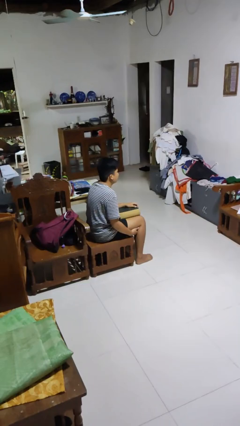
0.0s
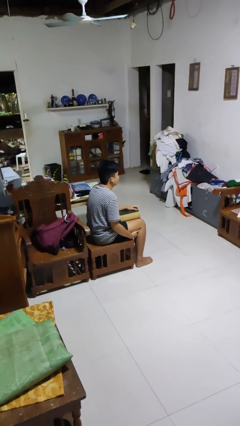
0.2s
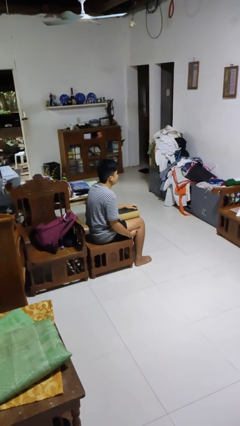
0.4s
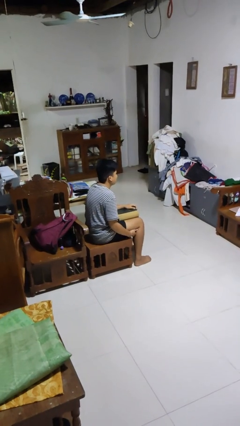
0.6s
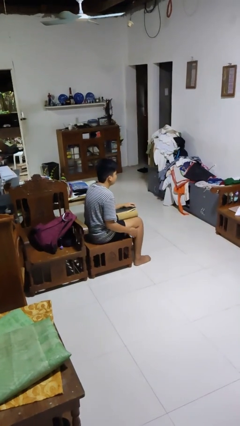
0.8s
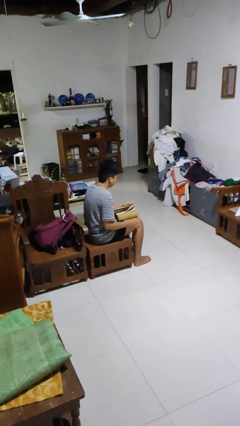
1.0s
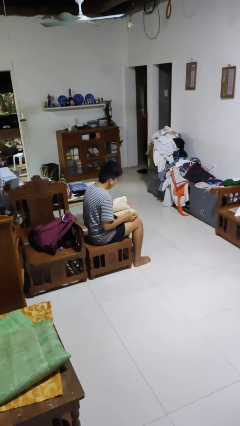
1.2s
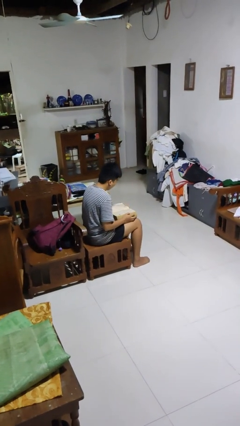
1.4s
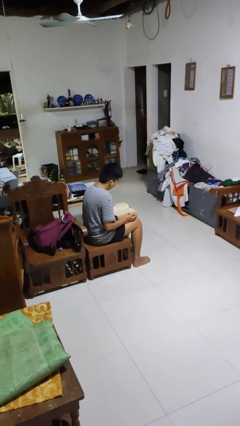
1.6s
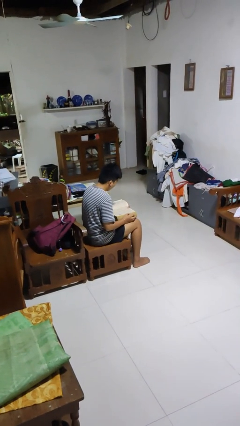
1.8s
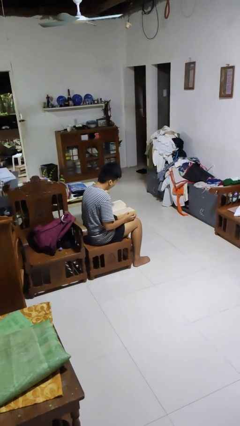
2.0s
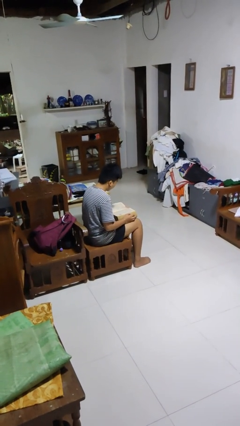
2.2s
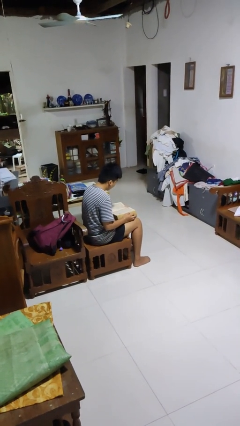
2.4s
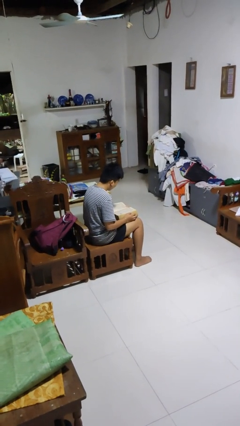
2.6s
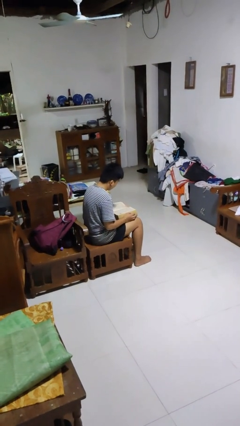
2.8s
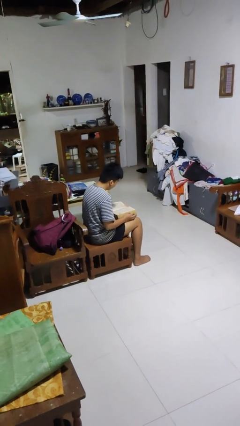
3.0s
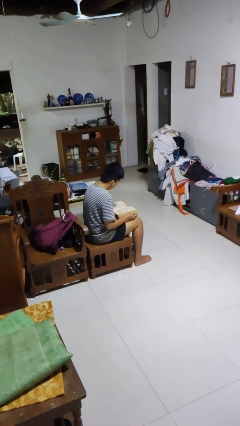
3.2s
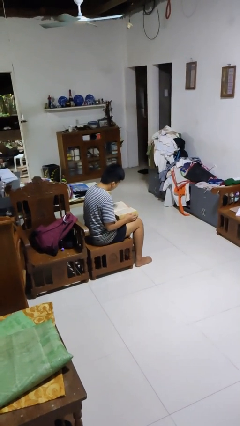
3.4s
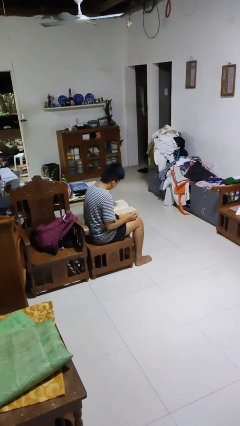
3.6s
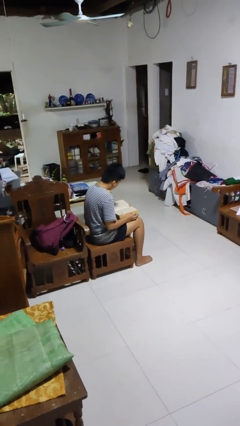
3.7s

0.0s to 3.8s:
person reads book

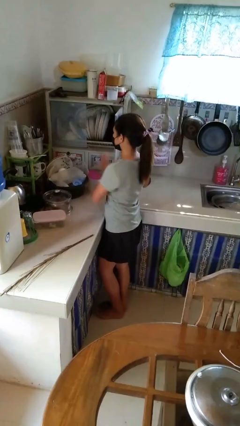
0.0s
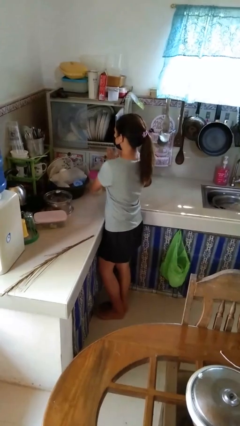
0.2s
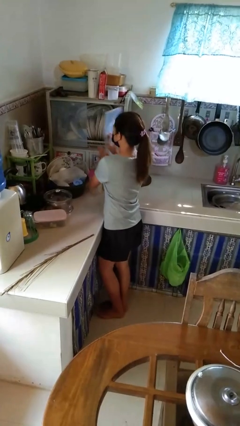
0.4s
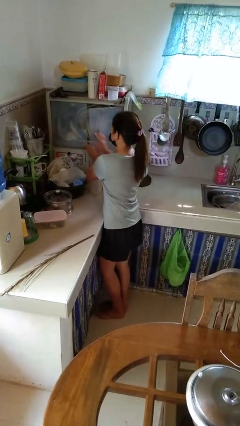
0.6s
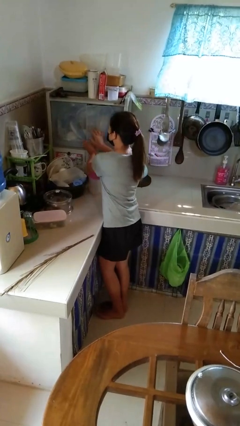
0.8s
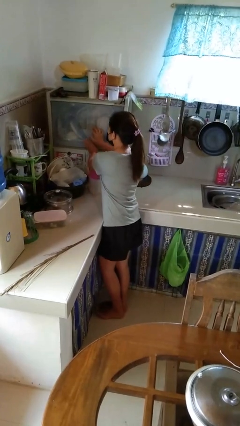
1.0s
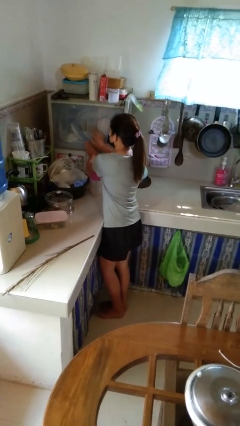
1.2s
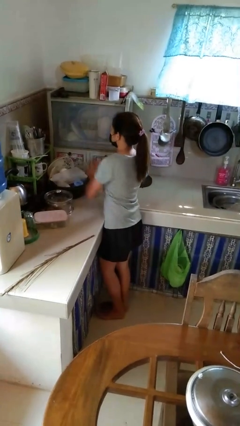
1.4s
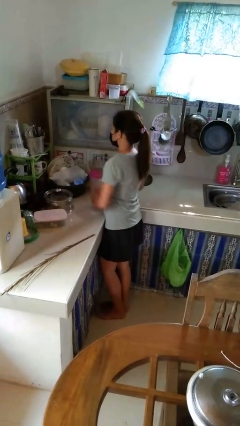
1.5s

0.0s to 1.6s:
person closes kitchen drawer

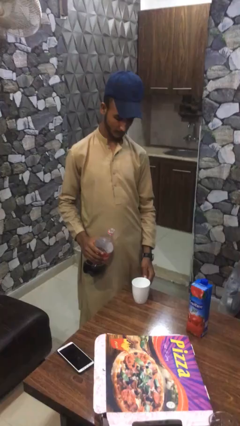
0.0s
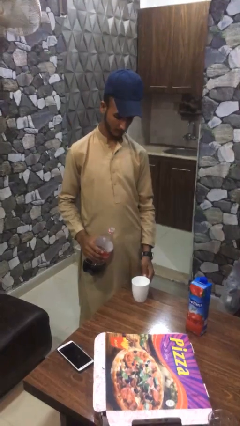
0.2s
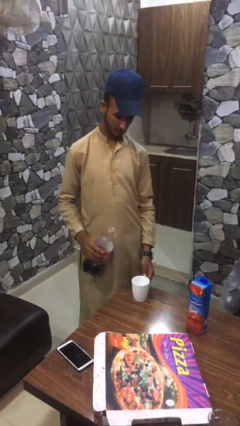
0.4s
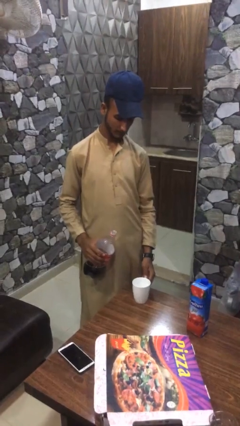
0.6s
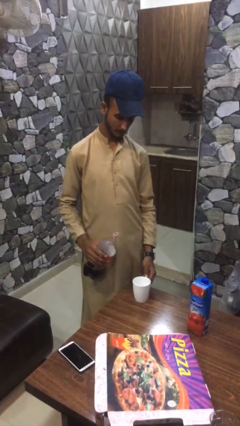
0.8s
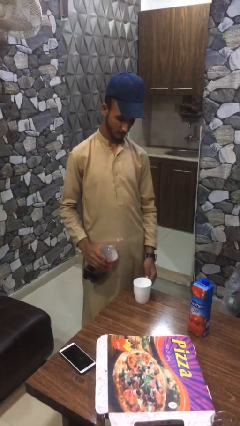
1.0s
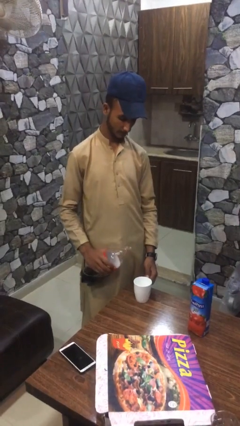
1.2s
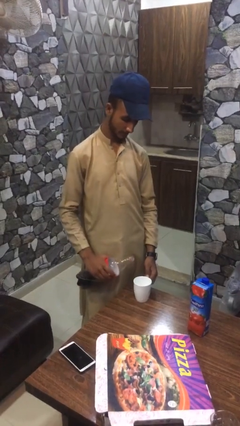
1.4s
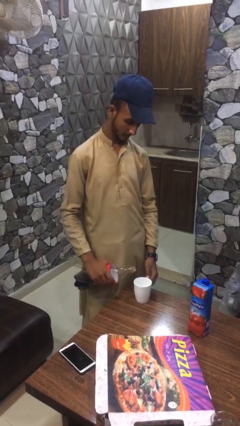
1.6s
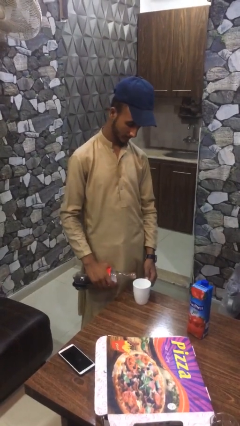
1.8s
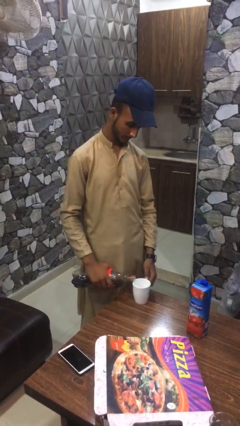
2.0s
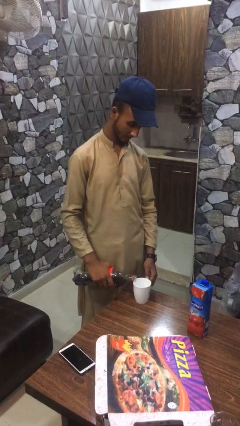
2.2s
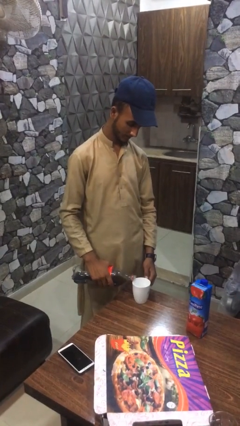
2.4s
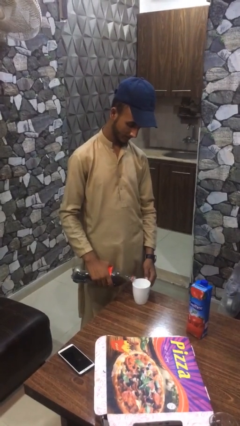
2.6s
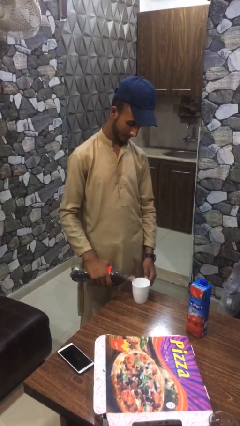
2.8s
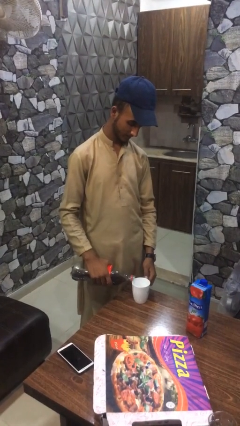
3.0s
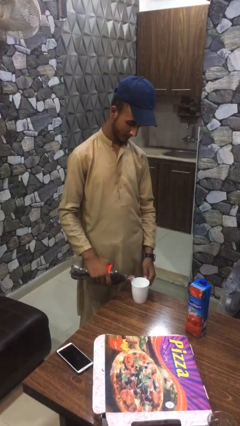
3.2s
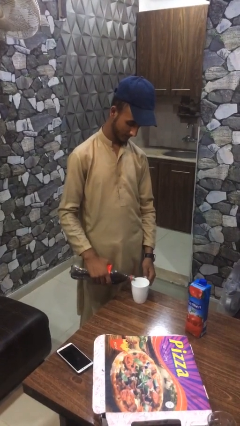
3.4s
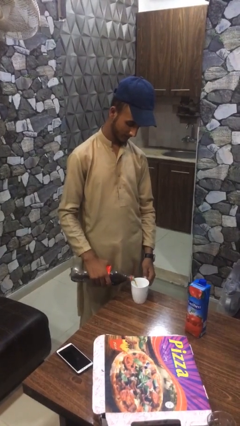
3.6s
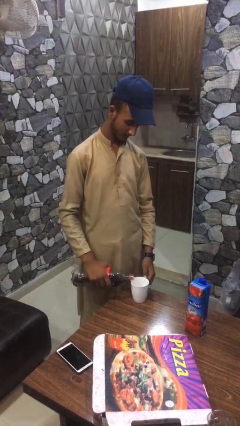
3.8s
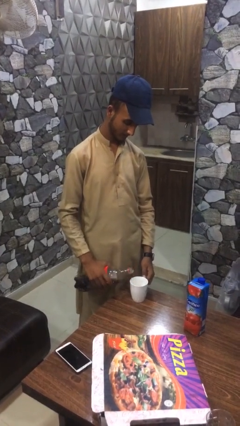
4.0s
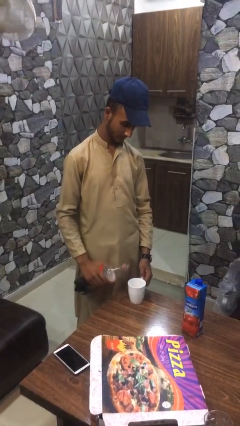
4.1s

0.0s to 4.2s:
person pours coffee into mug

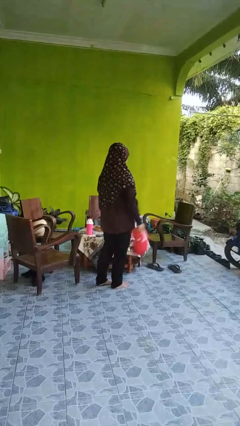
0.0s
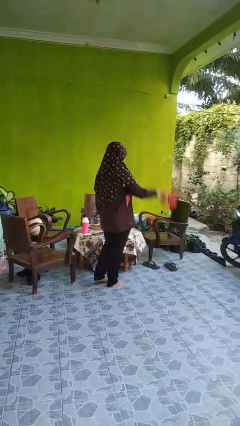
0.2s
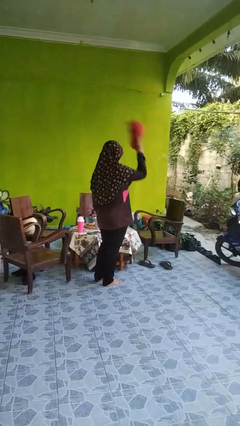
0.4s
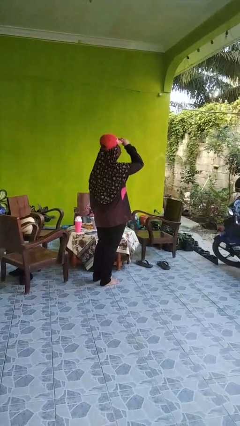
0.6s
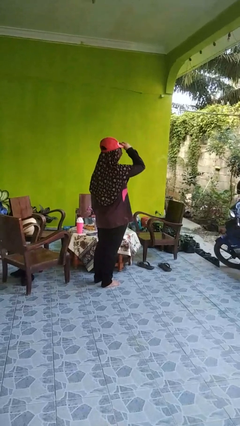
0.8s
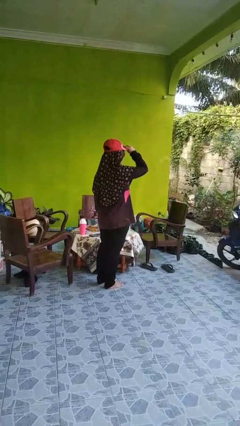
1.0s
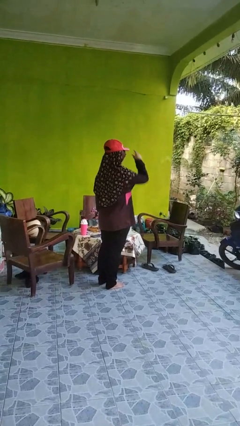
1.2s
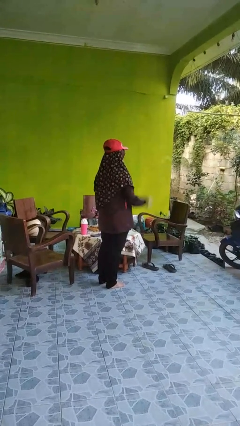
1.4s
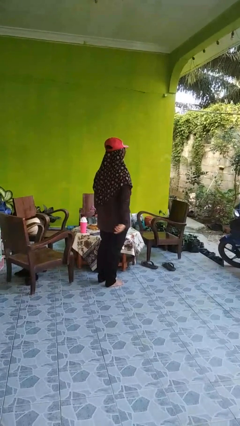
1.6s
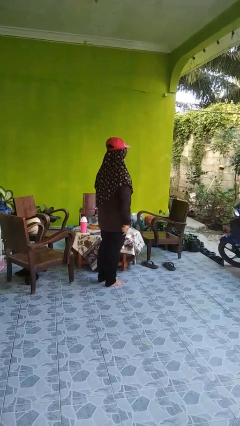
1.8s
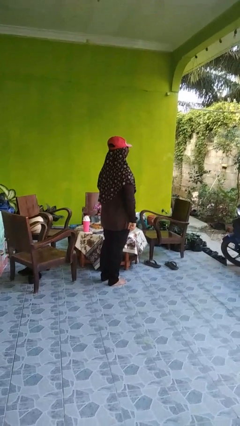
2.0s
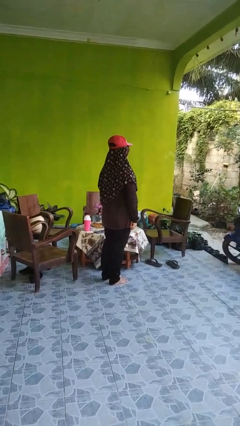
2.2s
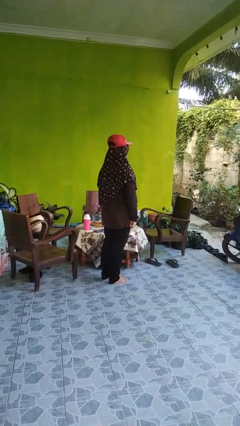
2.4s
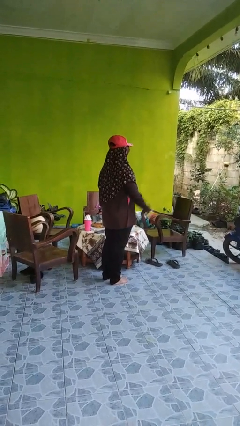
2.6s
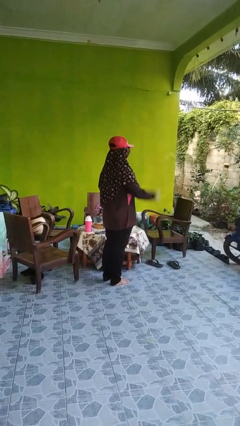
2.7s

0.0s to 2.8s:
person puts on hat

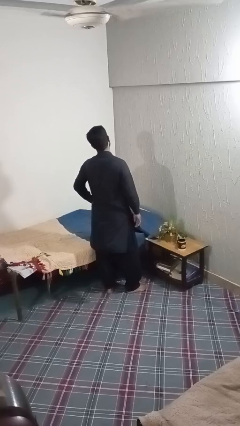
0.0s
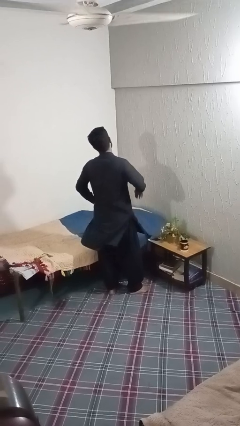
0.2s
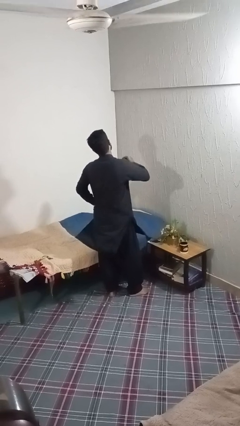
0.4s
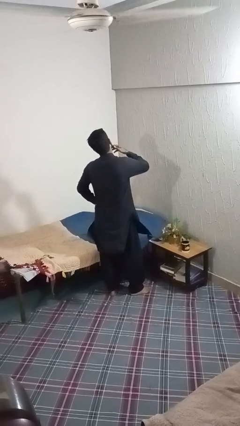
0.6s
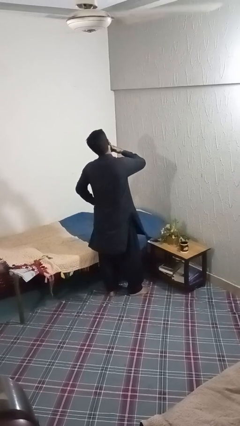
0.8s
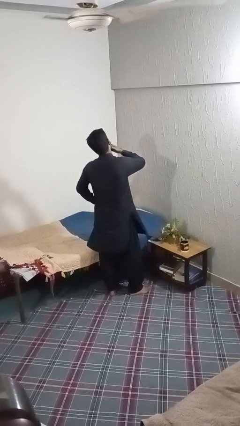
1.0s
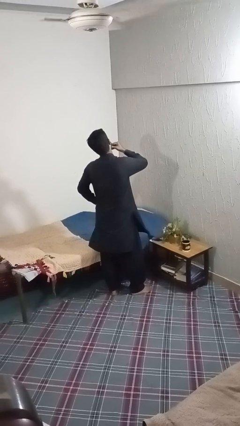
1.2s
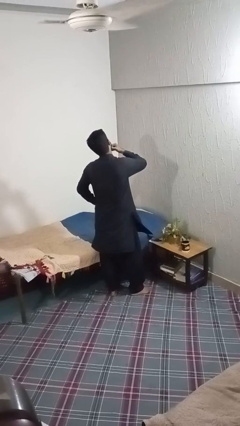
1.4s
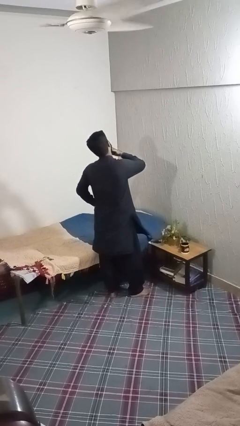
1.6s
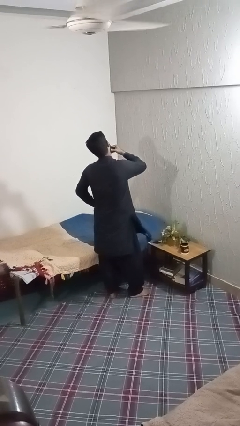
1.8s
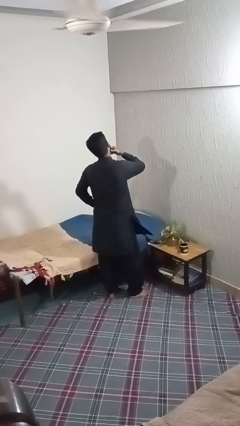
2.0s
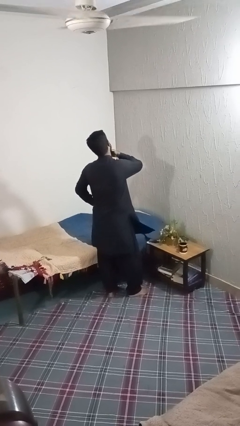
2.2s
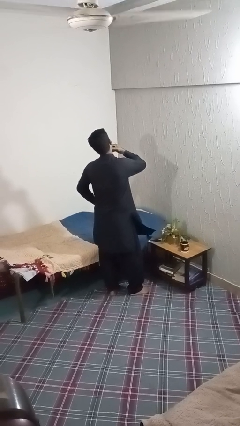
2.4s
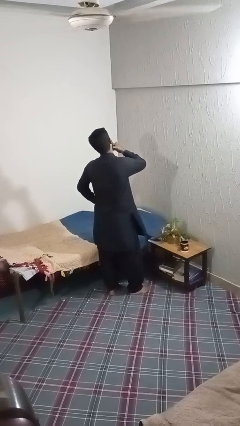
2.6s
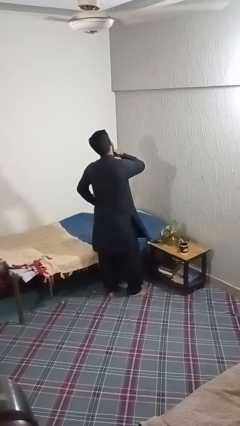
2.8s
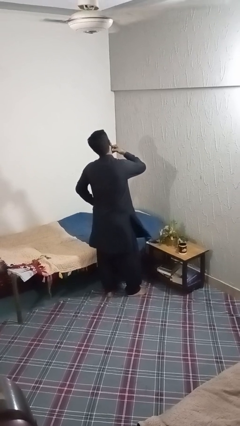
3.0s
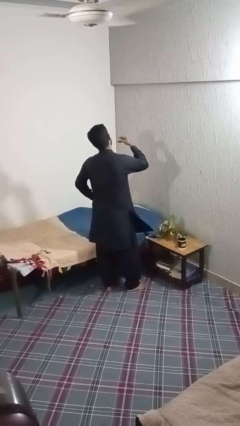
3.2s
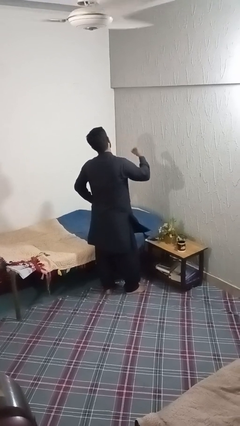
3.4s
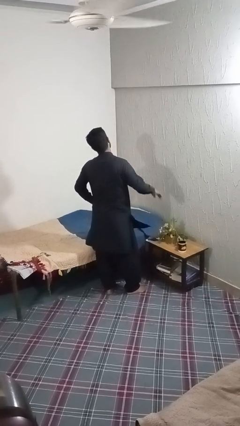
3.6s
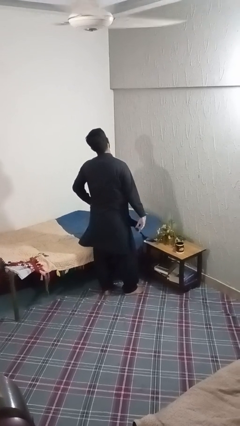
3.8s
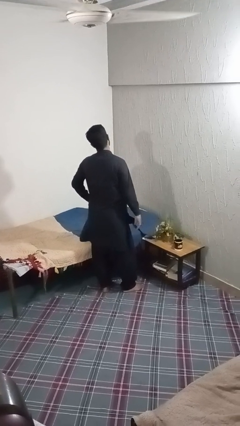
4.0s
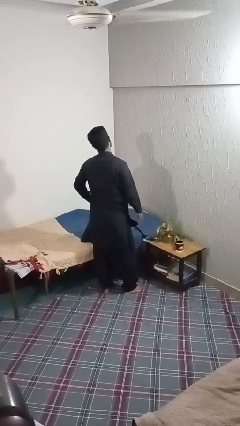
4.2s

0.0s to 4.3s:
person strokes chin

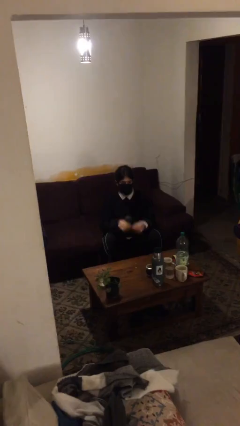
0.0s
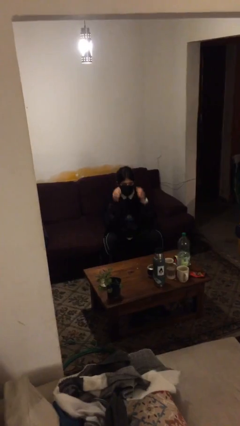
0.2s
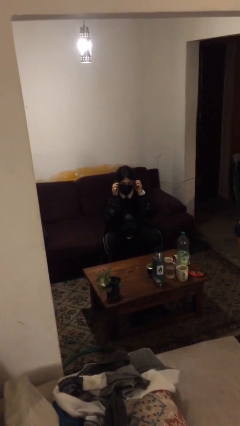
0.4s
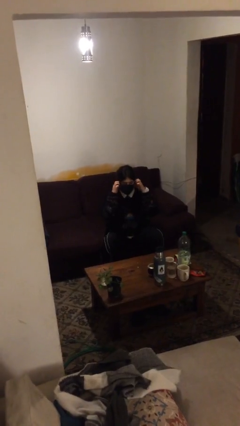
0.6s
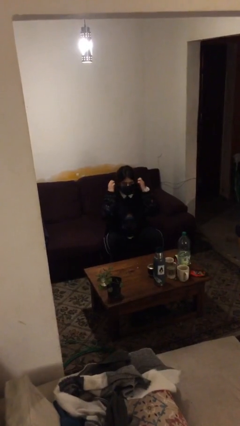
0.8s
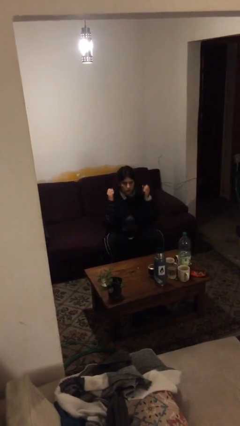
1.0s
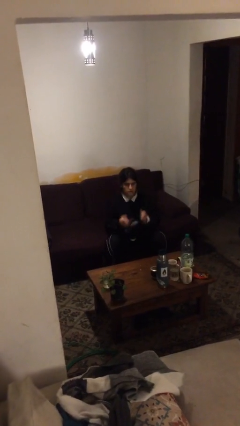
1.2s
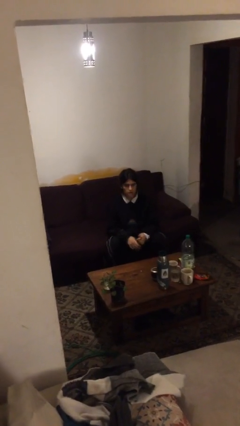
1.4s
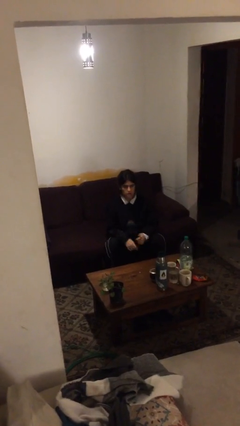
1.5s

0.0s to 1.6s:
person takes off facemask
